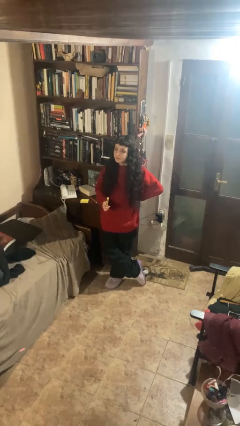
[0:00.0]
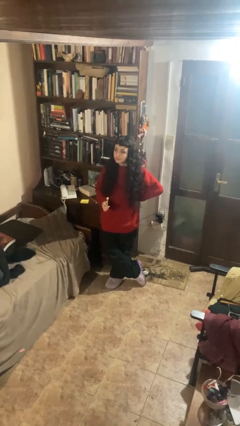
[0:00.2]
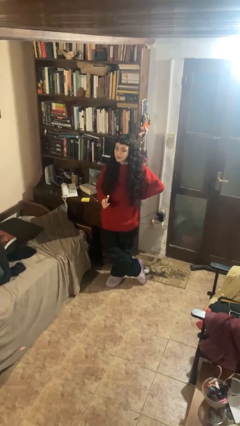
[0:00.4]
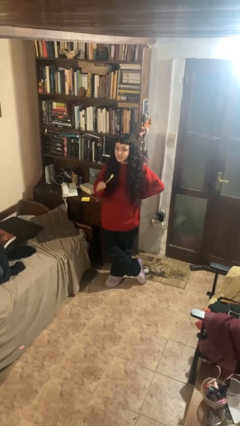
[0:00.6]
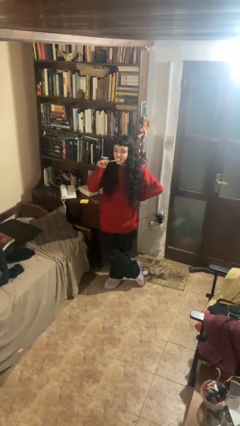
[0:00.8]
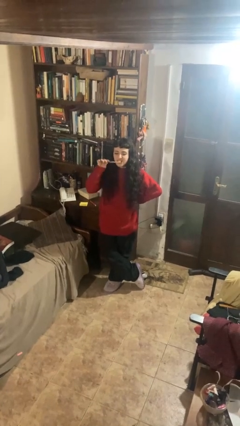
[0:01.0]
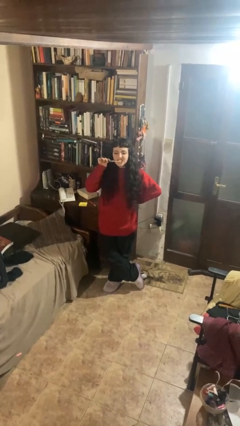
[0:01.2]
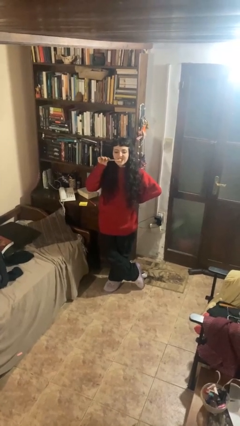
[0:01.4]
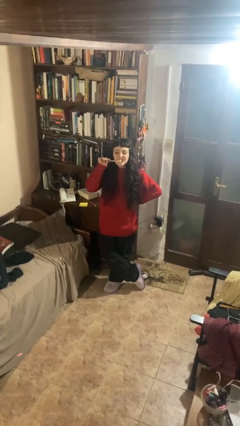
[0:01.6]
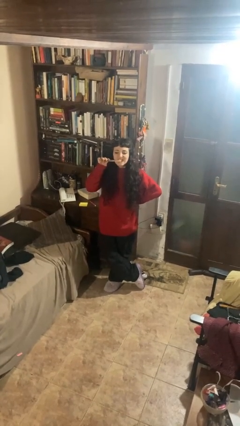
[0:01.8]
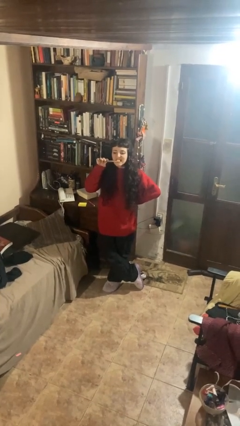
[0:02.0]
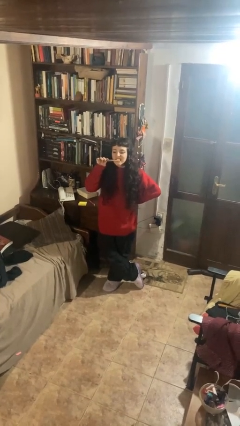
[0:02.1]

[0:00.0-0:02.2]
person brushes teeth

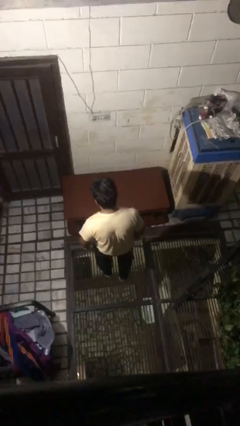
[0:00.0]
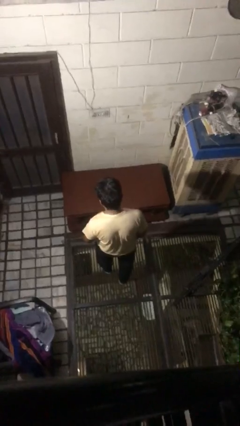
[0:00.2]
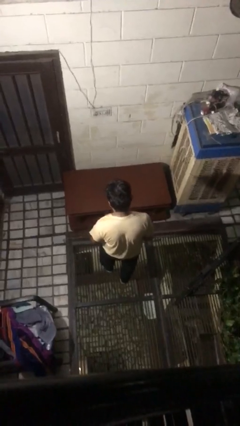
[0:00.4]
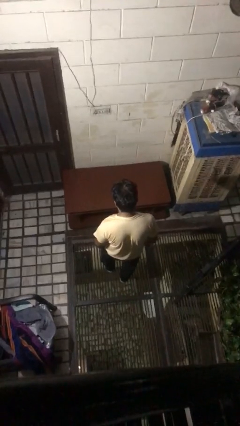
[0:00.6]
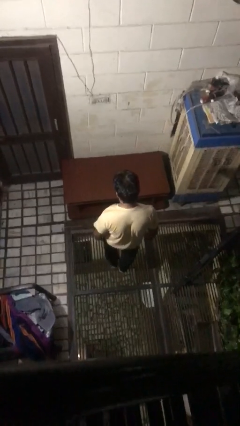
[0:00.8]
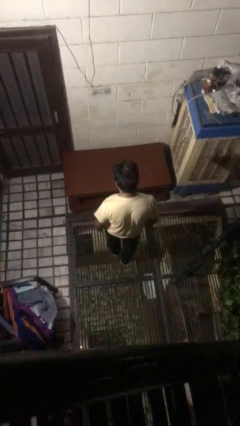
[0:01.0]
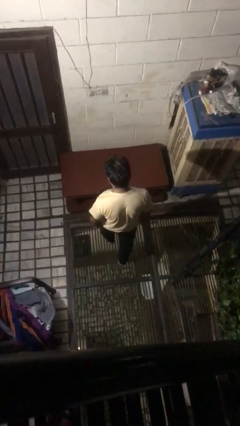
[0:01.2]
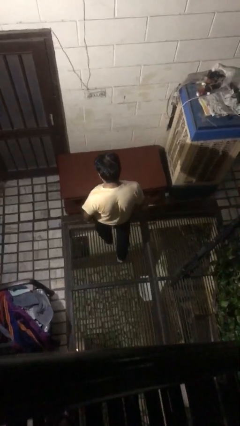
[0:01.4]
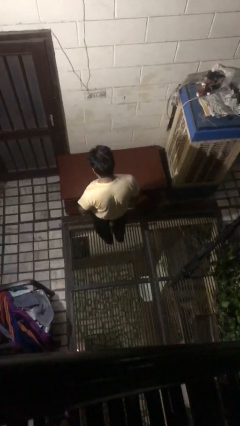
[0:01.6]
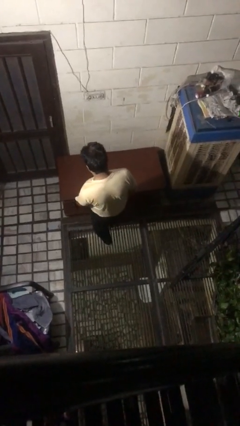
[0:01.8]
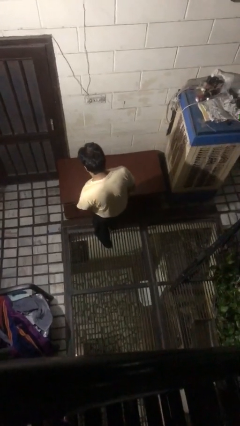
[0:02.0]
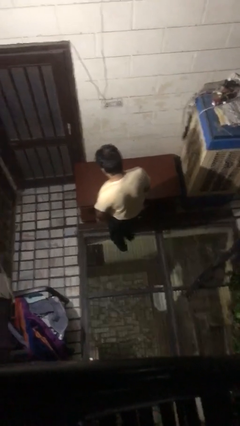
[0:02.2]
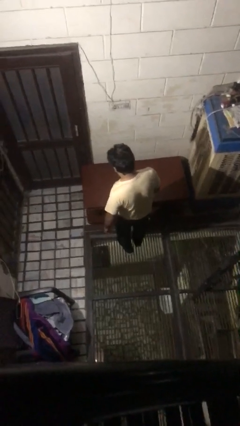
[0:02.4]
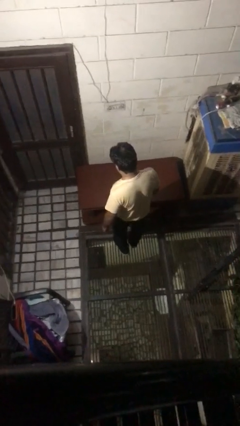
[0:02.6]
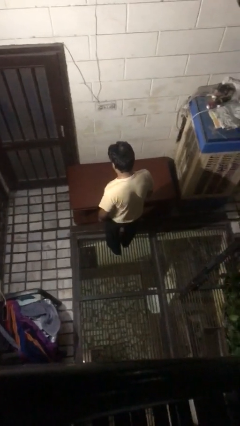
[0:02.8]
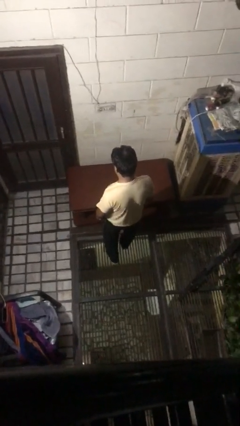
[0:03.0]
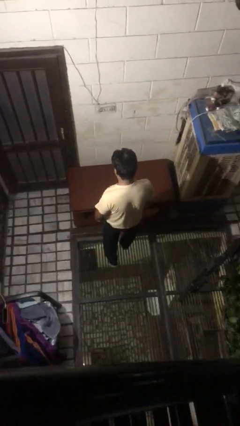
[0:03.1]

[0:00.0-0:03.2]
person bumps into table

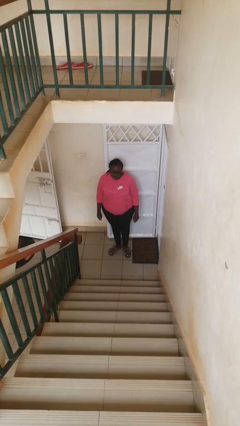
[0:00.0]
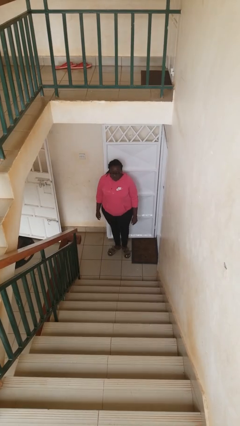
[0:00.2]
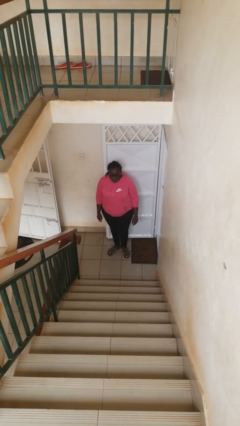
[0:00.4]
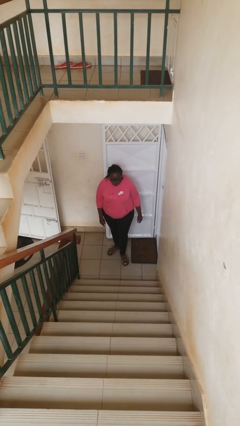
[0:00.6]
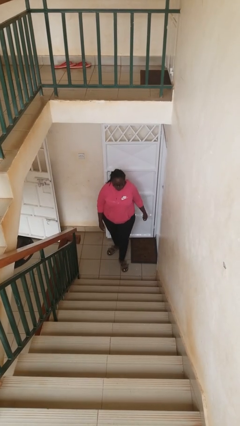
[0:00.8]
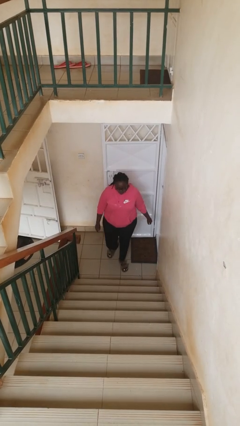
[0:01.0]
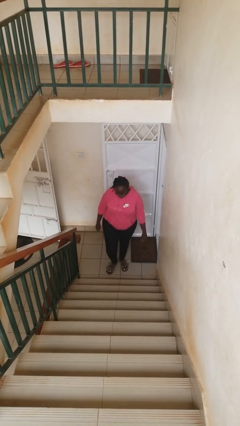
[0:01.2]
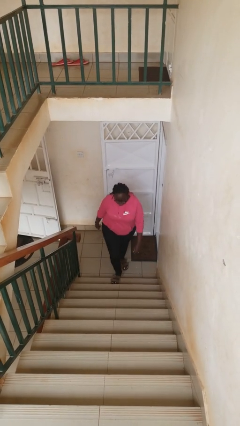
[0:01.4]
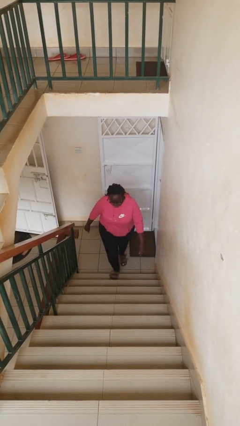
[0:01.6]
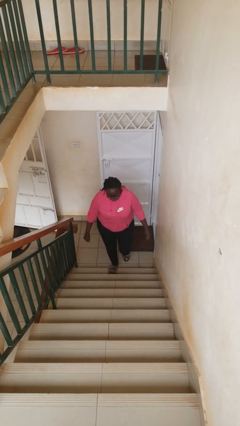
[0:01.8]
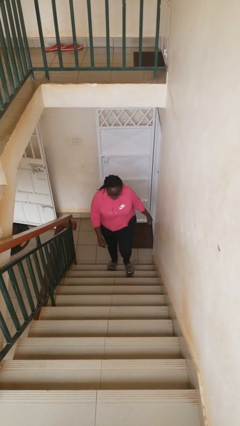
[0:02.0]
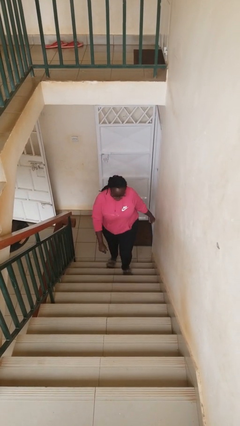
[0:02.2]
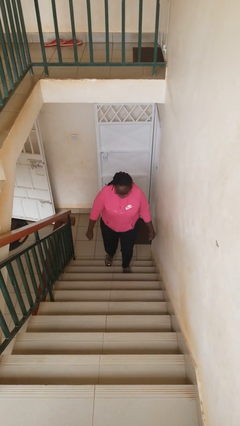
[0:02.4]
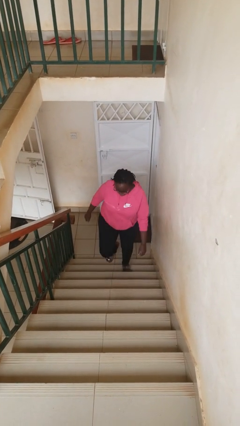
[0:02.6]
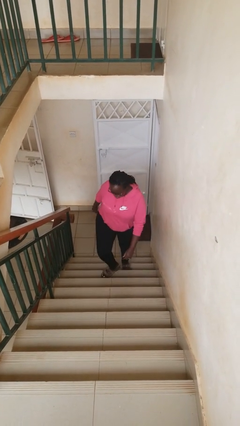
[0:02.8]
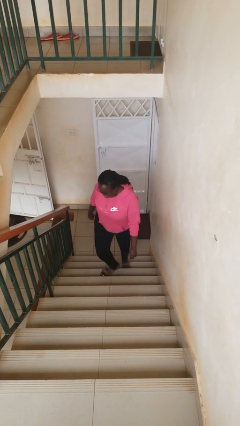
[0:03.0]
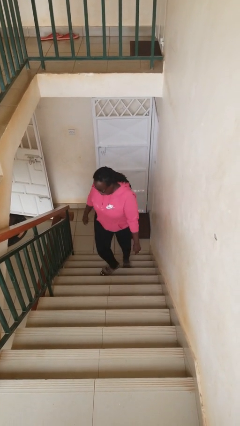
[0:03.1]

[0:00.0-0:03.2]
person climbs up stairs

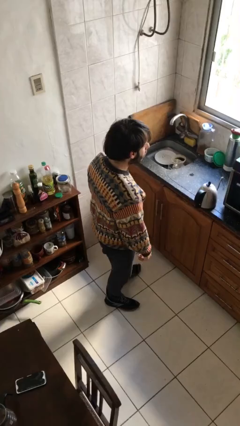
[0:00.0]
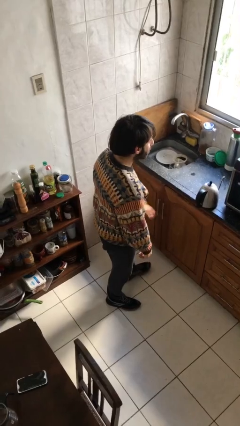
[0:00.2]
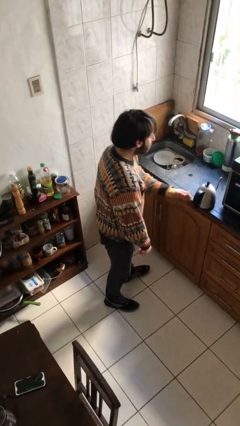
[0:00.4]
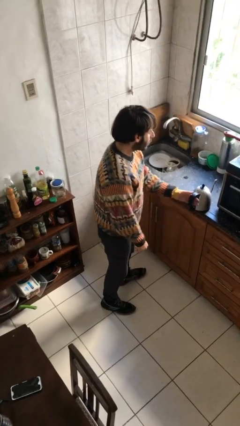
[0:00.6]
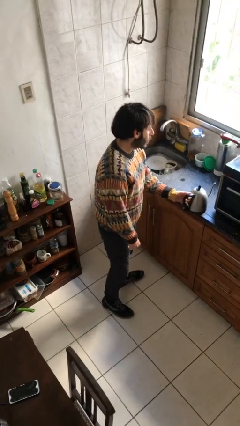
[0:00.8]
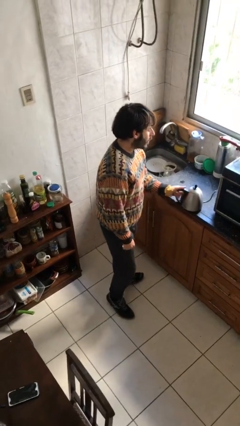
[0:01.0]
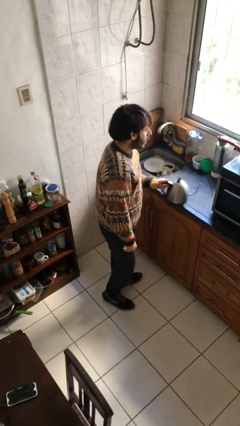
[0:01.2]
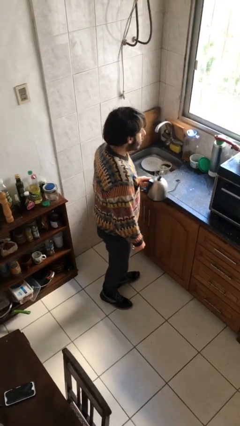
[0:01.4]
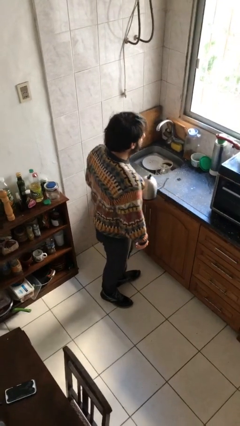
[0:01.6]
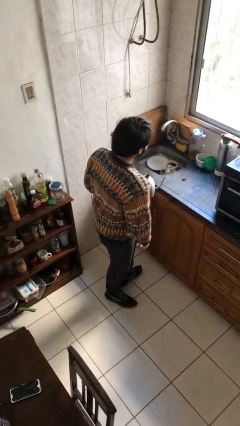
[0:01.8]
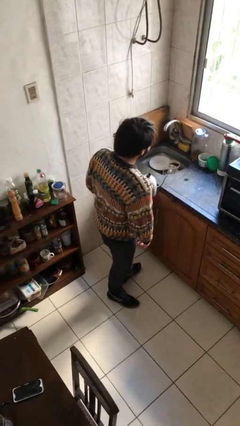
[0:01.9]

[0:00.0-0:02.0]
person picks up object from countertop

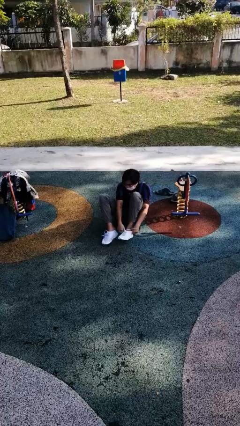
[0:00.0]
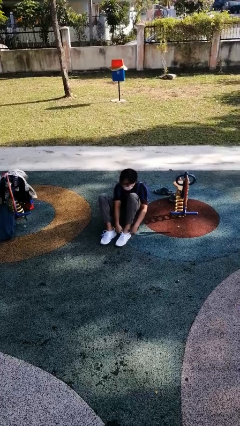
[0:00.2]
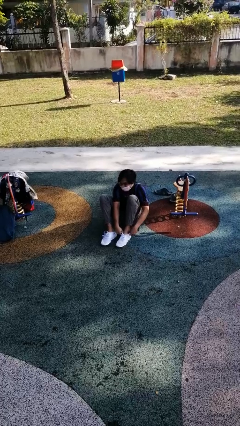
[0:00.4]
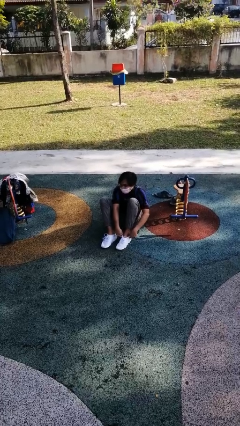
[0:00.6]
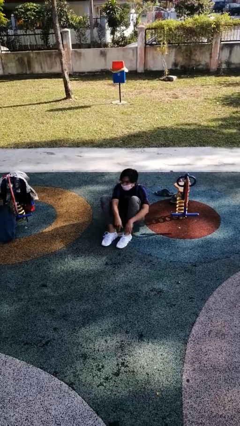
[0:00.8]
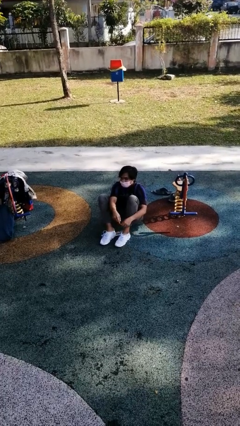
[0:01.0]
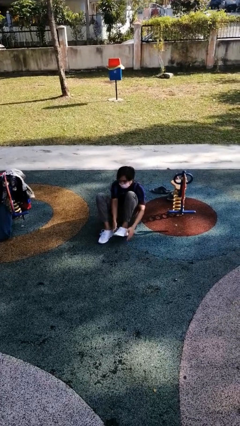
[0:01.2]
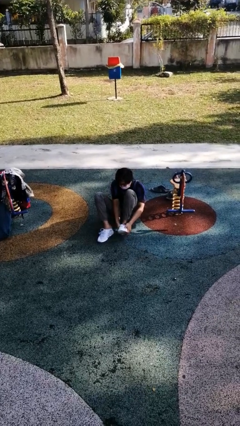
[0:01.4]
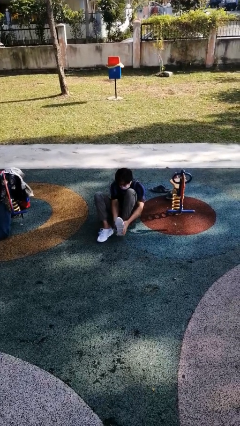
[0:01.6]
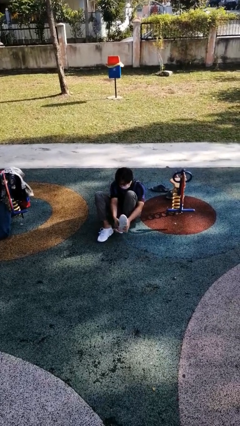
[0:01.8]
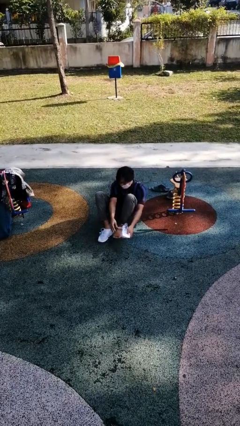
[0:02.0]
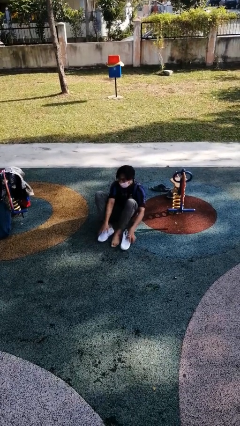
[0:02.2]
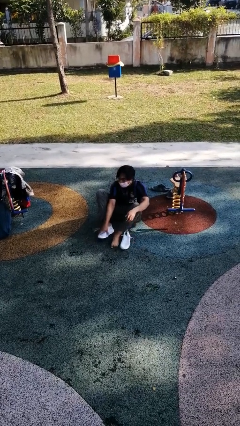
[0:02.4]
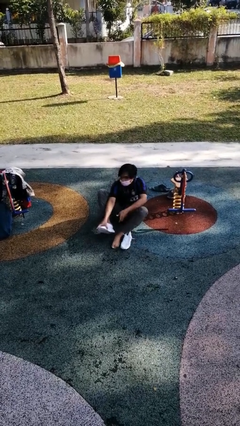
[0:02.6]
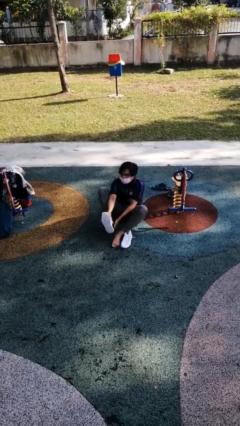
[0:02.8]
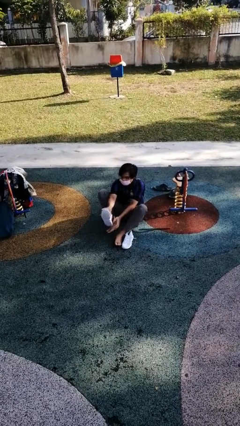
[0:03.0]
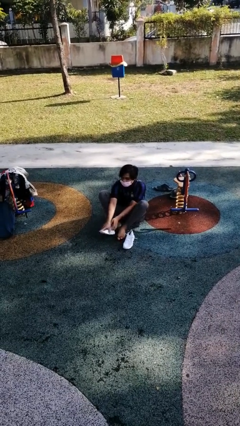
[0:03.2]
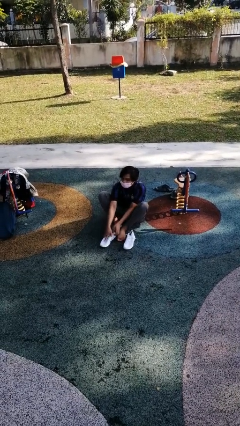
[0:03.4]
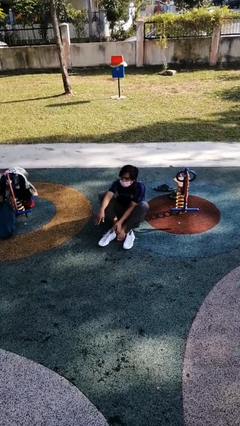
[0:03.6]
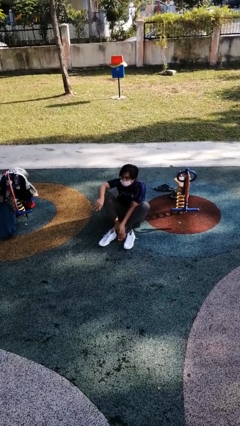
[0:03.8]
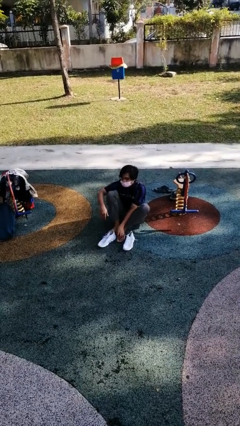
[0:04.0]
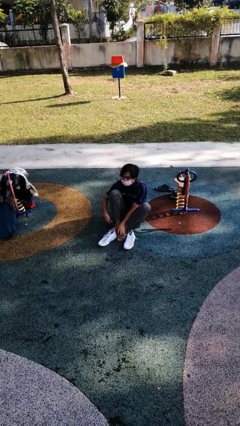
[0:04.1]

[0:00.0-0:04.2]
person takes off shoes

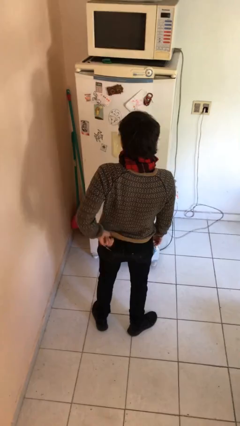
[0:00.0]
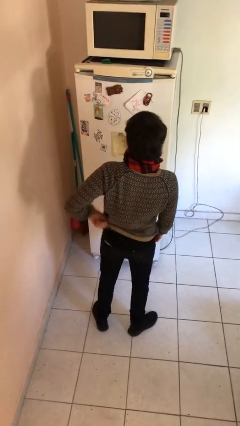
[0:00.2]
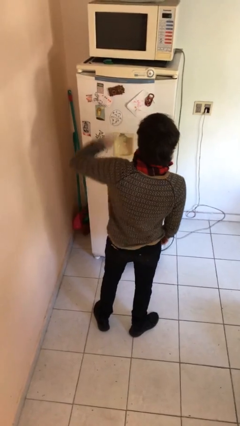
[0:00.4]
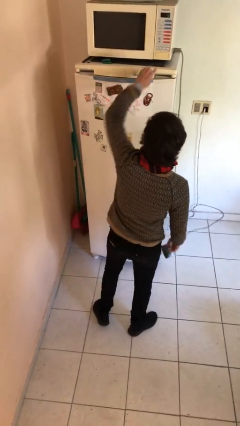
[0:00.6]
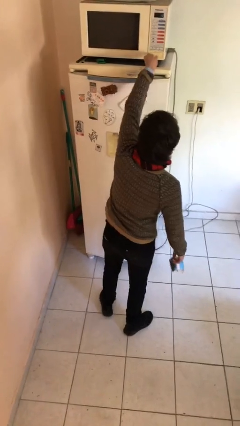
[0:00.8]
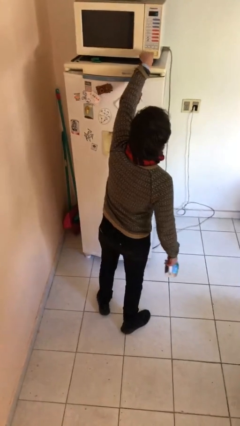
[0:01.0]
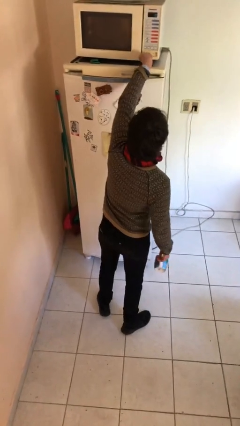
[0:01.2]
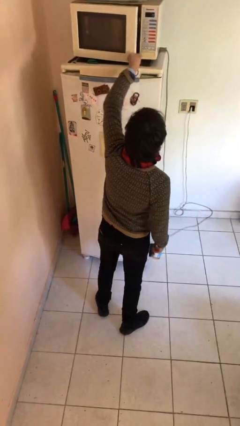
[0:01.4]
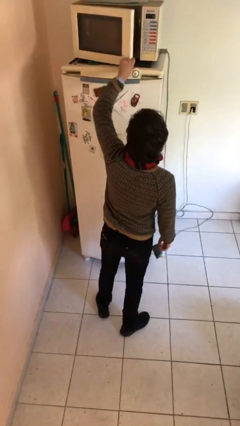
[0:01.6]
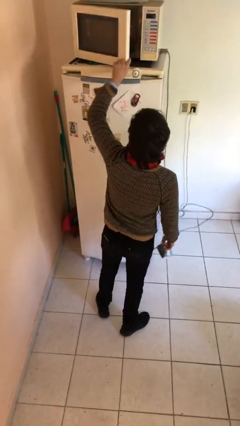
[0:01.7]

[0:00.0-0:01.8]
person opens microwave

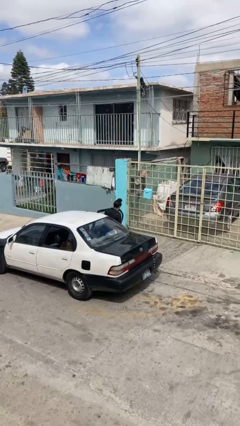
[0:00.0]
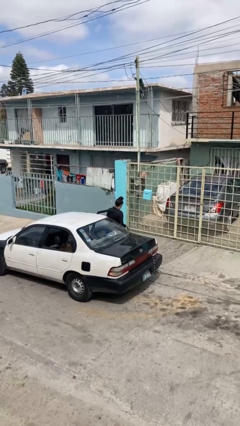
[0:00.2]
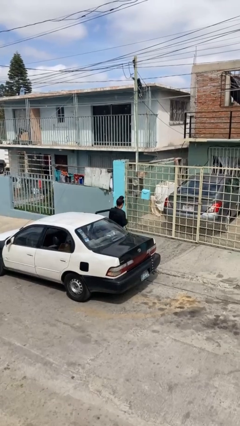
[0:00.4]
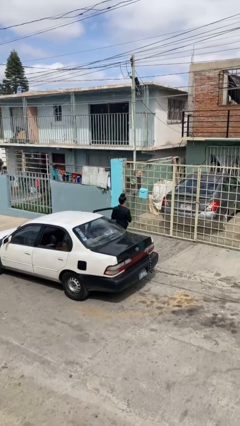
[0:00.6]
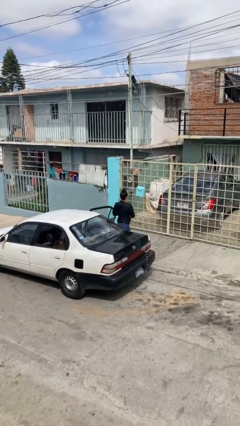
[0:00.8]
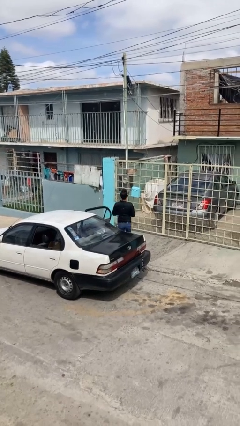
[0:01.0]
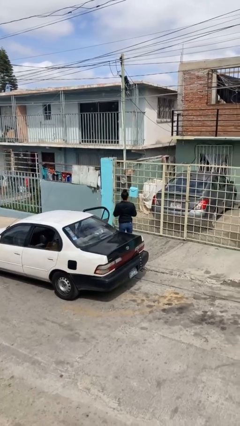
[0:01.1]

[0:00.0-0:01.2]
person exits car
